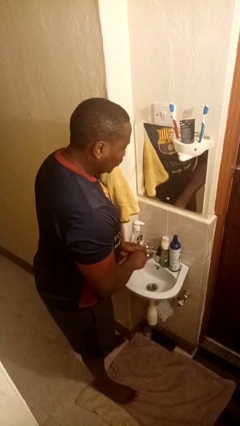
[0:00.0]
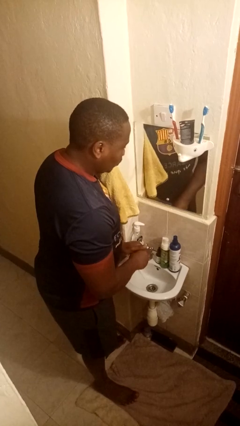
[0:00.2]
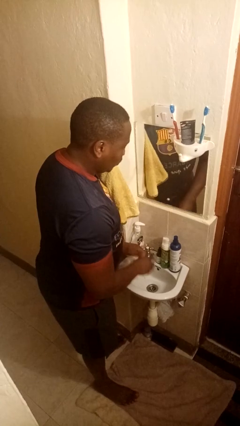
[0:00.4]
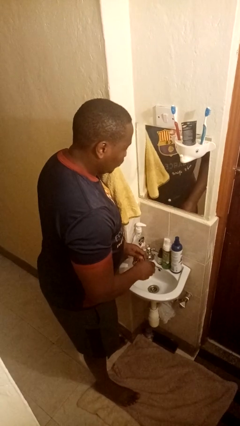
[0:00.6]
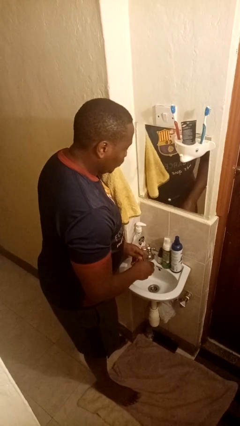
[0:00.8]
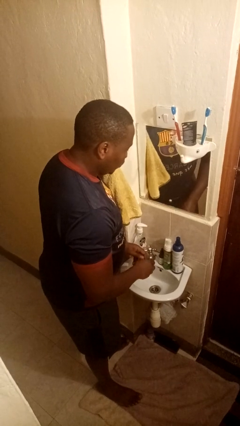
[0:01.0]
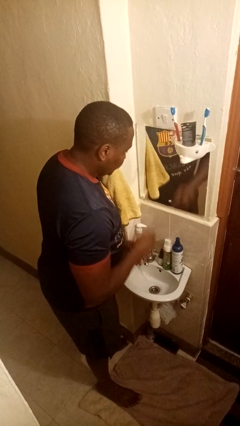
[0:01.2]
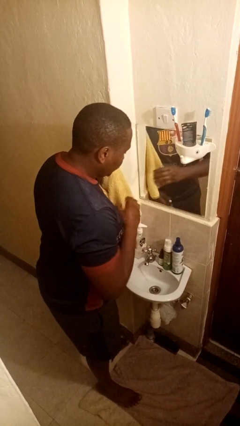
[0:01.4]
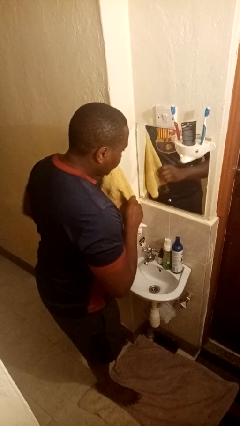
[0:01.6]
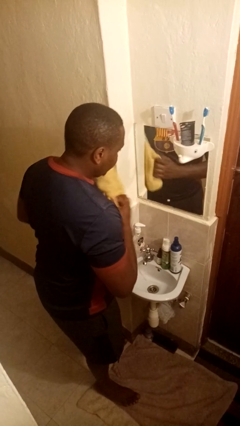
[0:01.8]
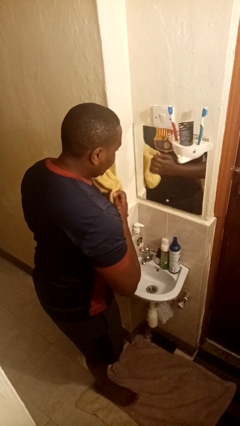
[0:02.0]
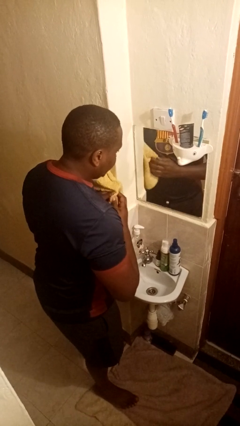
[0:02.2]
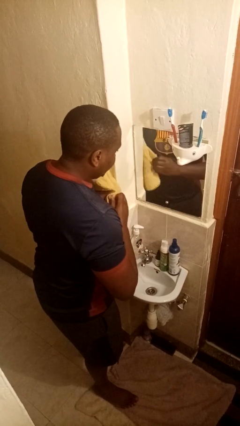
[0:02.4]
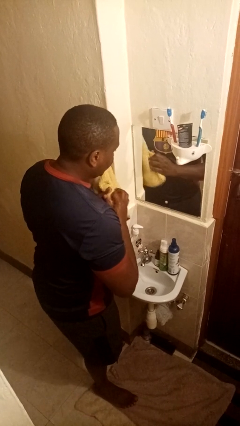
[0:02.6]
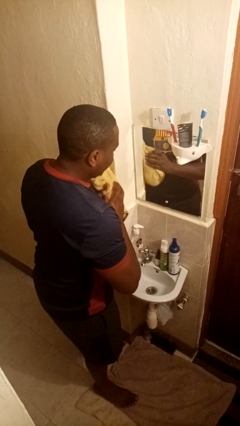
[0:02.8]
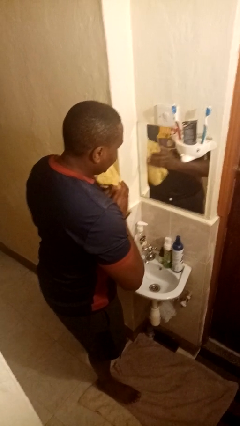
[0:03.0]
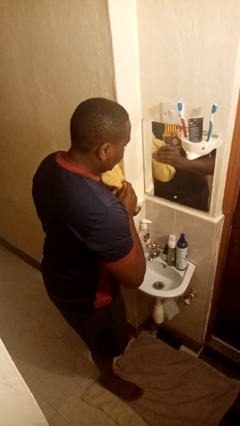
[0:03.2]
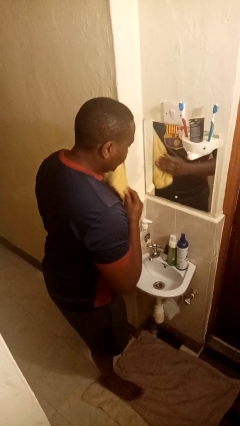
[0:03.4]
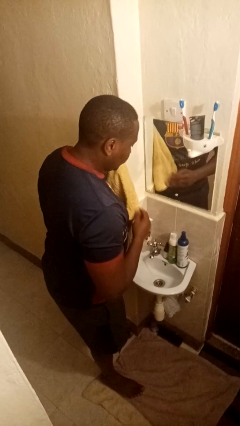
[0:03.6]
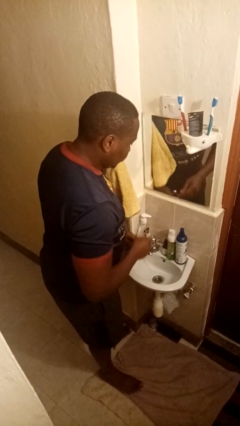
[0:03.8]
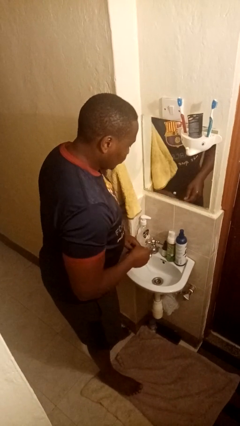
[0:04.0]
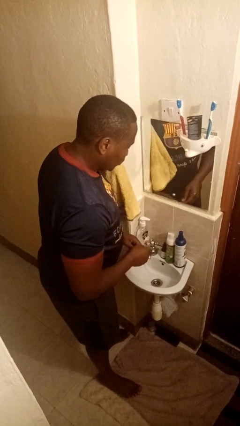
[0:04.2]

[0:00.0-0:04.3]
person dries hands with towel

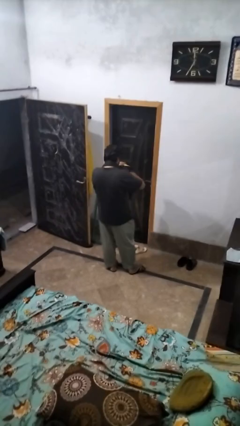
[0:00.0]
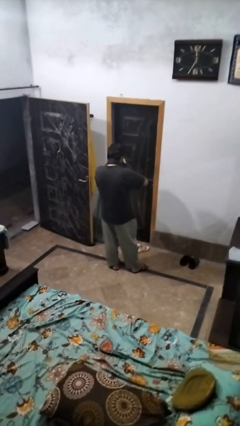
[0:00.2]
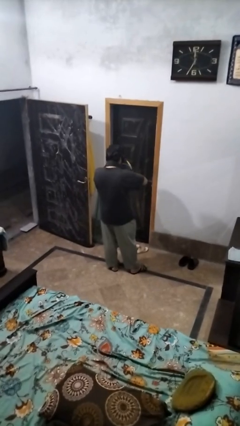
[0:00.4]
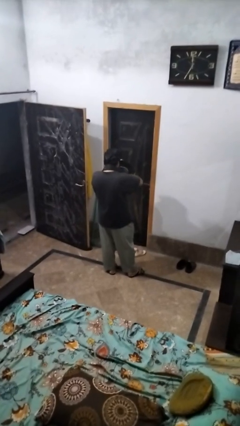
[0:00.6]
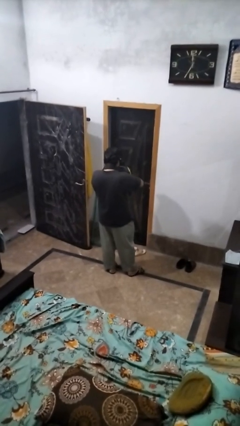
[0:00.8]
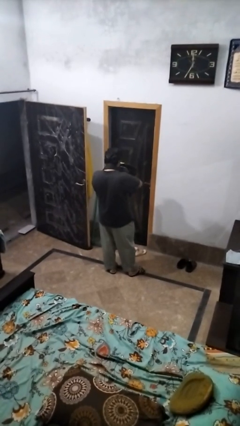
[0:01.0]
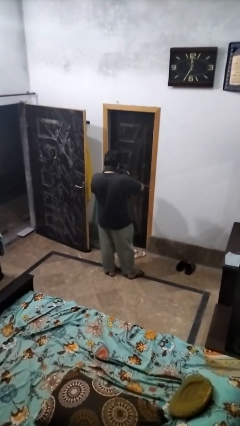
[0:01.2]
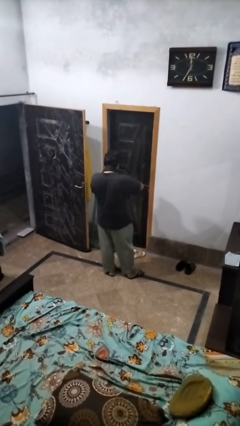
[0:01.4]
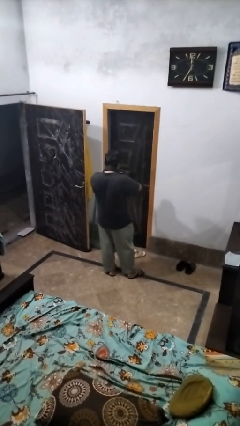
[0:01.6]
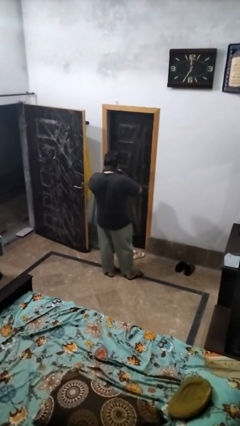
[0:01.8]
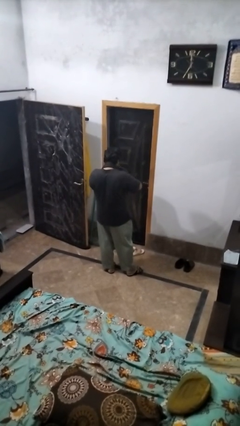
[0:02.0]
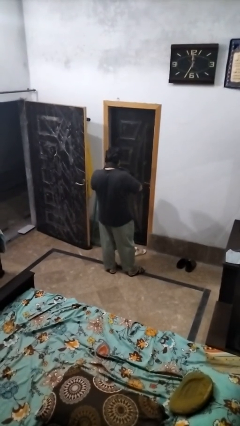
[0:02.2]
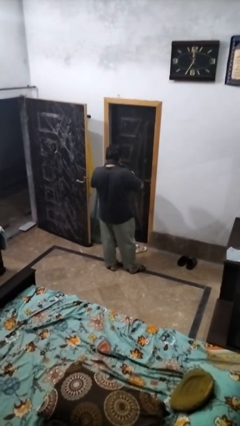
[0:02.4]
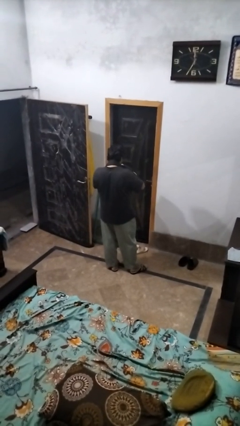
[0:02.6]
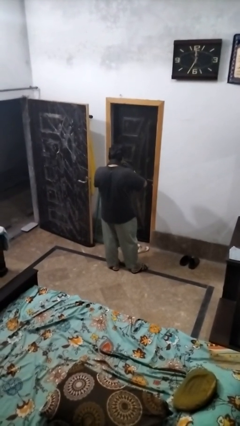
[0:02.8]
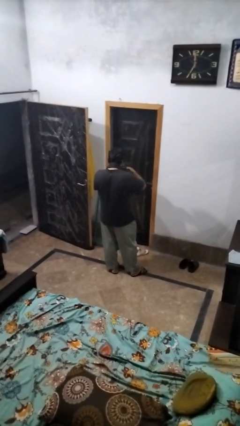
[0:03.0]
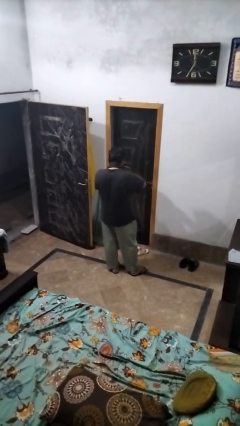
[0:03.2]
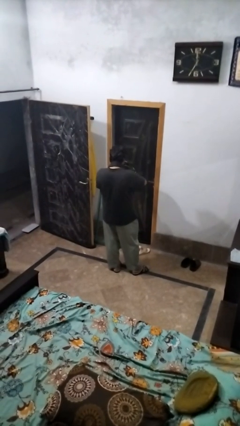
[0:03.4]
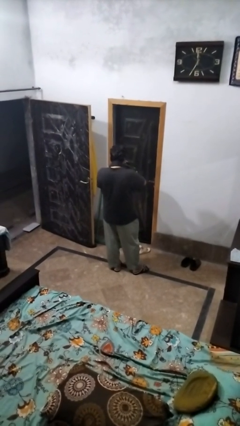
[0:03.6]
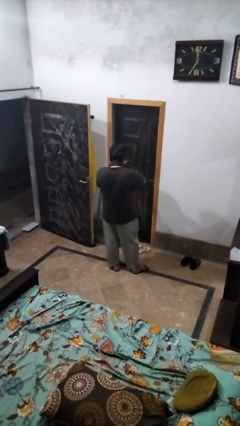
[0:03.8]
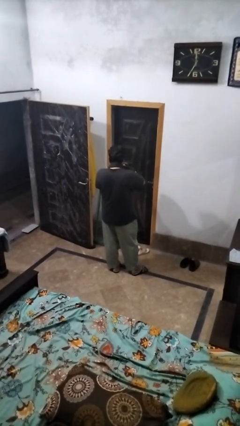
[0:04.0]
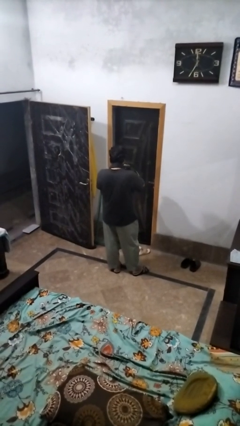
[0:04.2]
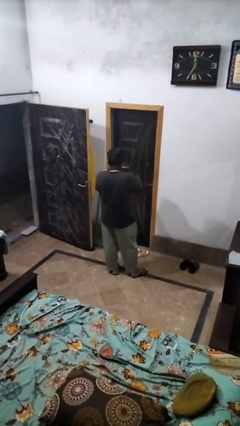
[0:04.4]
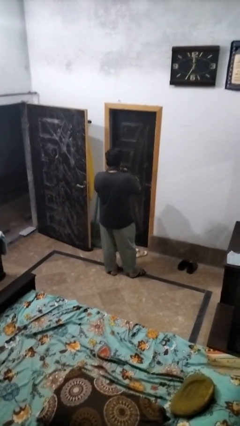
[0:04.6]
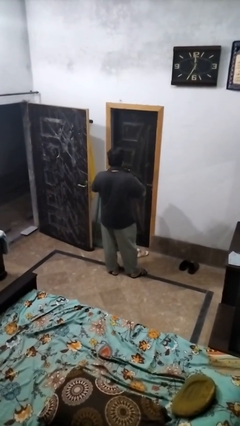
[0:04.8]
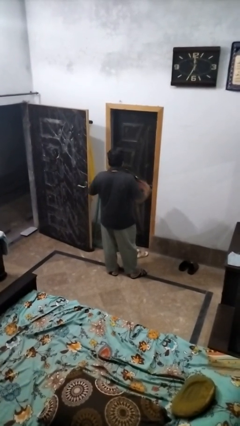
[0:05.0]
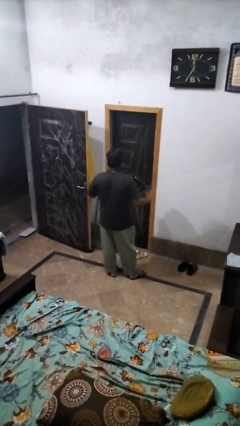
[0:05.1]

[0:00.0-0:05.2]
person searches in bag

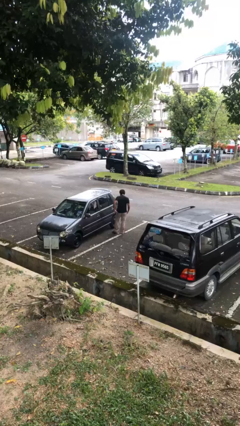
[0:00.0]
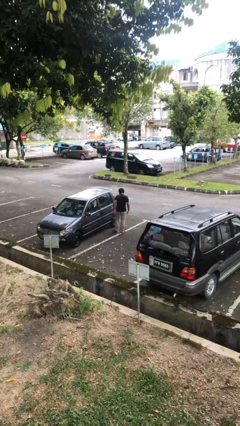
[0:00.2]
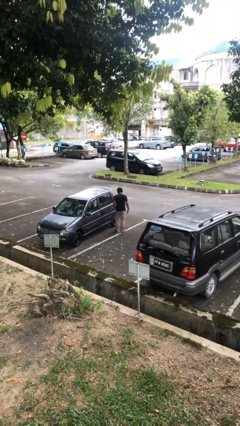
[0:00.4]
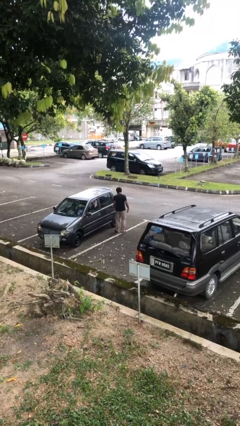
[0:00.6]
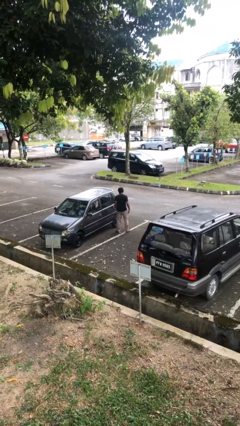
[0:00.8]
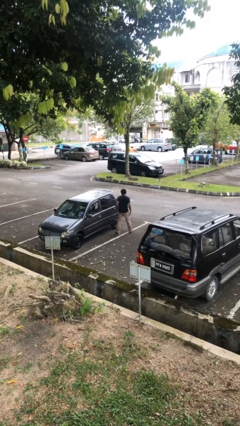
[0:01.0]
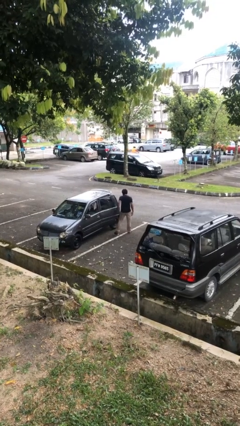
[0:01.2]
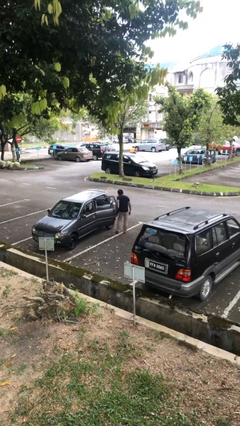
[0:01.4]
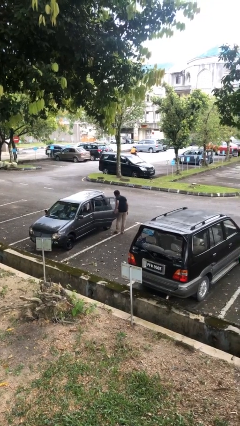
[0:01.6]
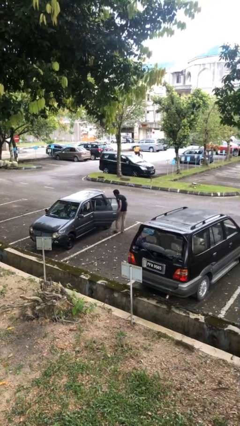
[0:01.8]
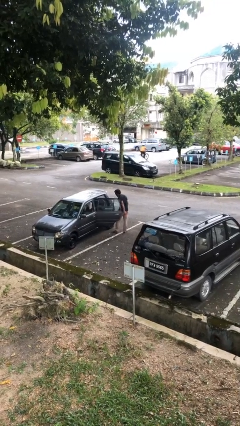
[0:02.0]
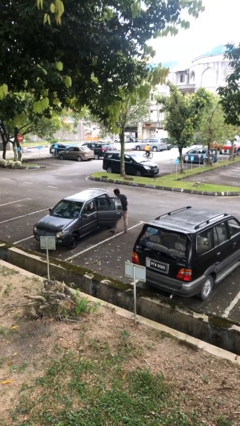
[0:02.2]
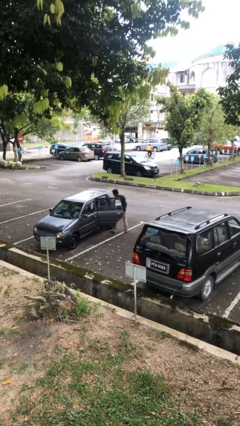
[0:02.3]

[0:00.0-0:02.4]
person opens car door

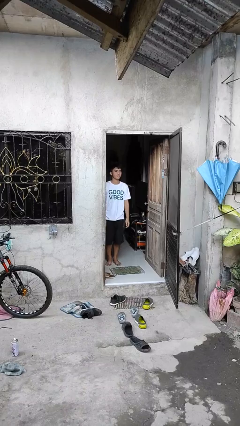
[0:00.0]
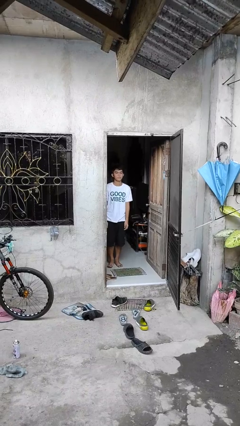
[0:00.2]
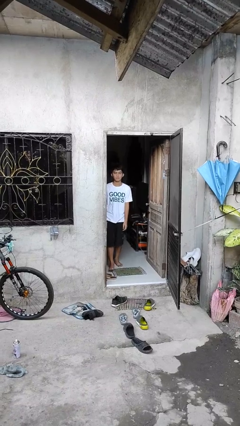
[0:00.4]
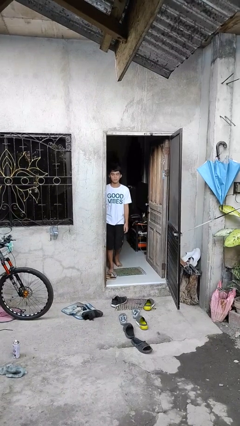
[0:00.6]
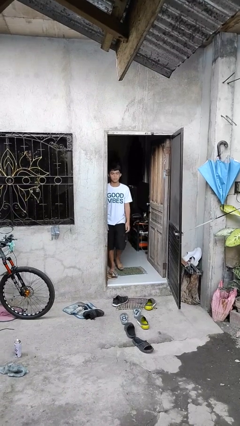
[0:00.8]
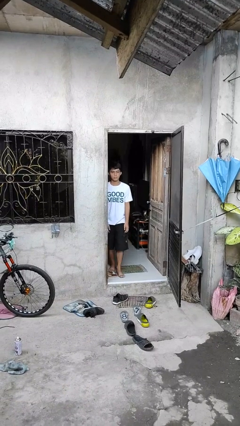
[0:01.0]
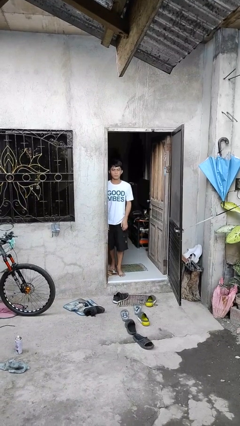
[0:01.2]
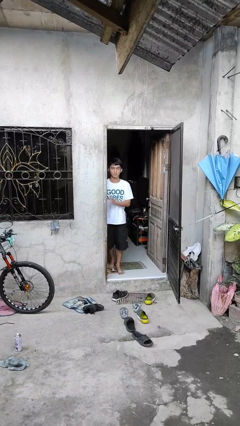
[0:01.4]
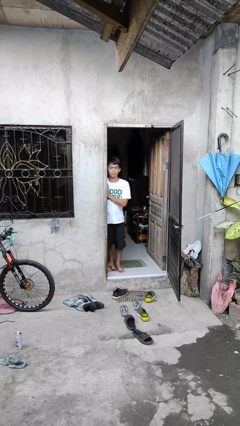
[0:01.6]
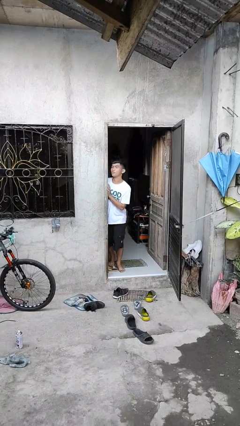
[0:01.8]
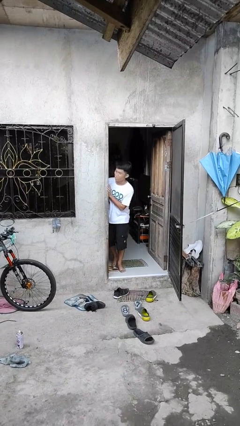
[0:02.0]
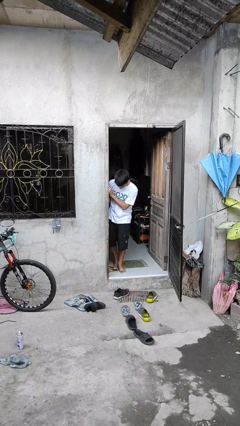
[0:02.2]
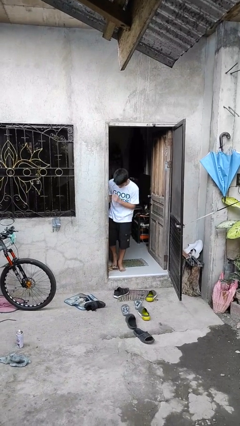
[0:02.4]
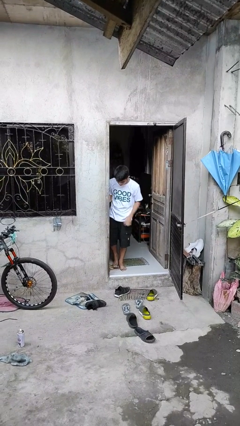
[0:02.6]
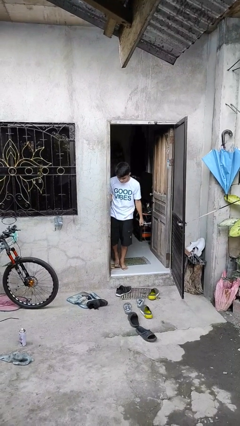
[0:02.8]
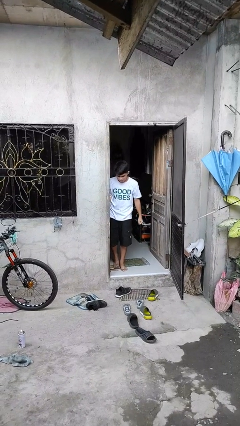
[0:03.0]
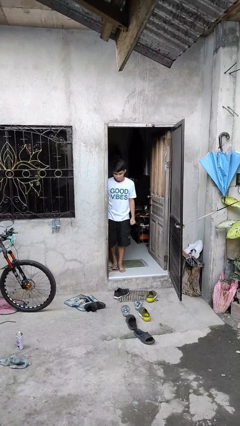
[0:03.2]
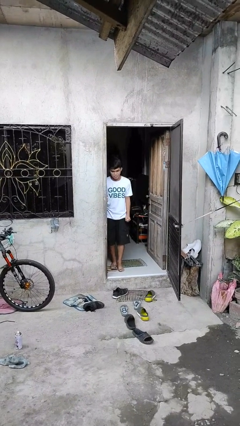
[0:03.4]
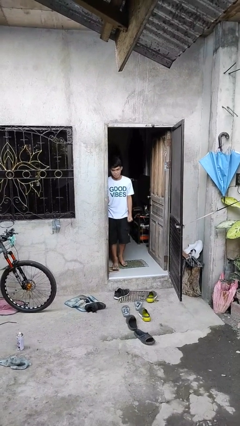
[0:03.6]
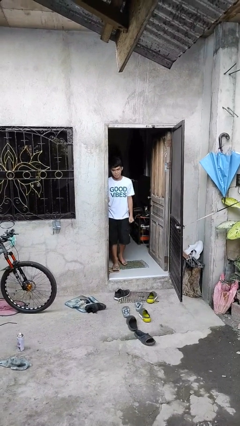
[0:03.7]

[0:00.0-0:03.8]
person bumps into wall

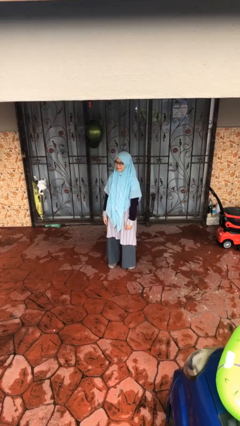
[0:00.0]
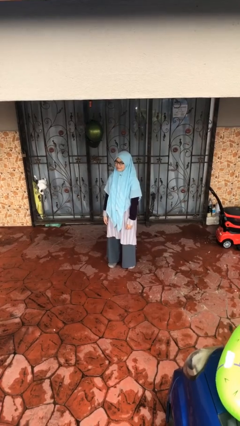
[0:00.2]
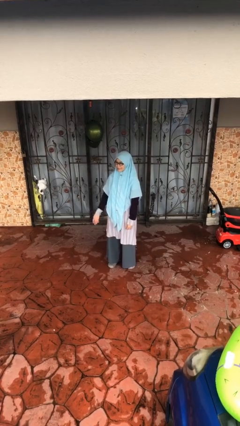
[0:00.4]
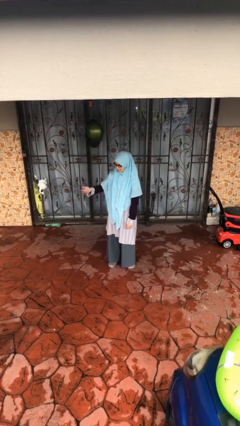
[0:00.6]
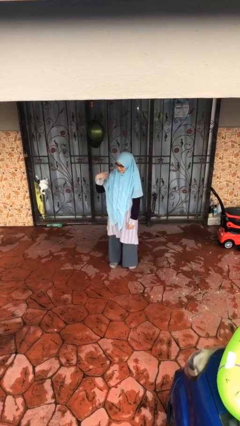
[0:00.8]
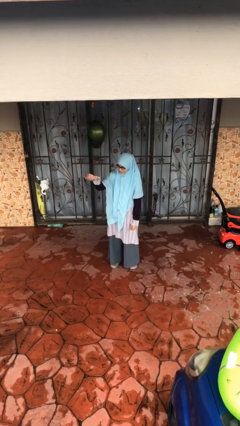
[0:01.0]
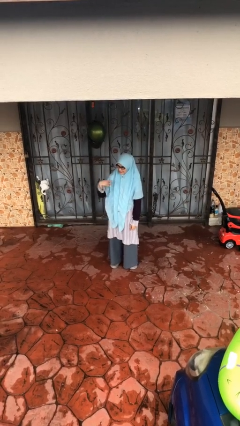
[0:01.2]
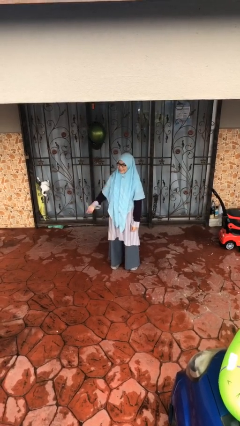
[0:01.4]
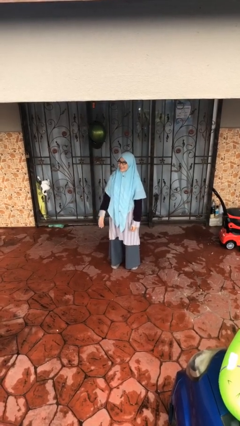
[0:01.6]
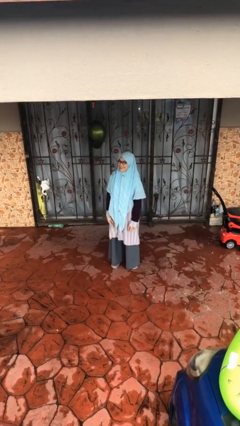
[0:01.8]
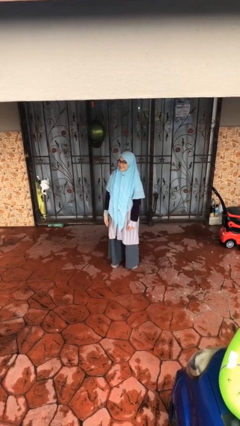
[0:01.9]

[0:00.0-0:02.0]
person gestures come here

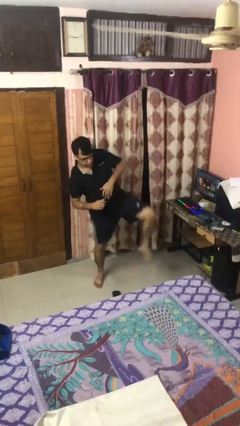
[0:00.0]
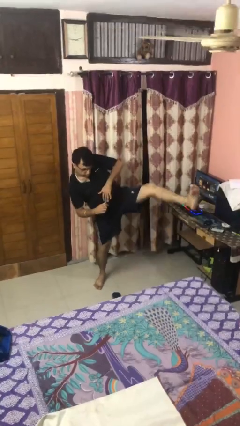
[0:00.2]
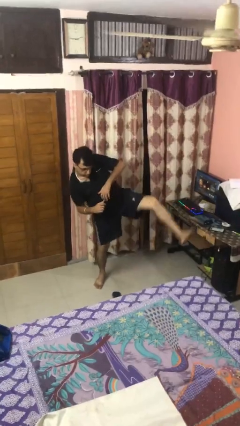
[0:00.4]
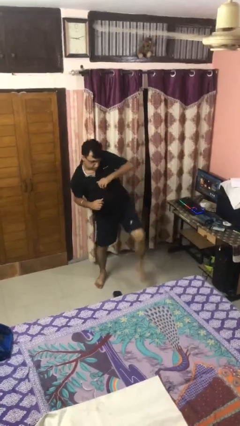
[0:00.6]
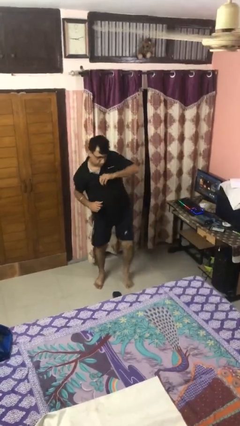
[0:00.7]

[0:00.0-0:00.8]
person karate kicks
